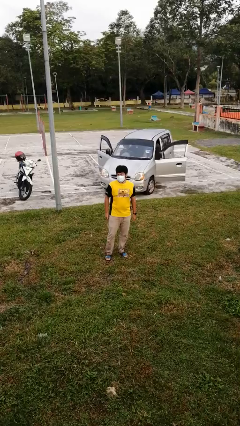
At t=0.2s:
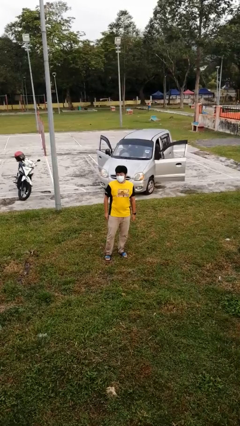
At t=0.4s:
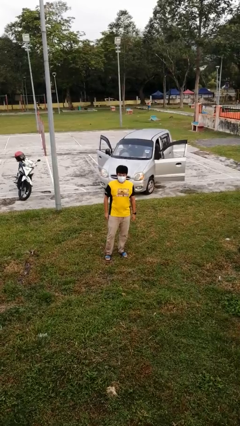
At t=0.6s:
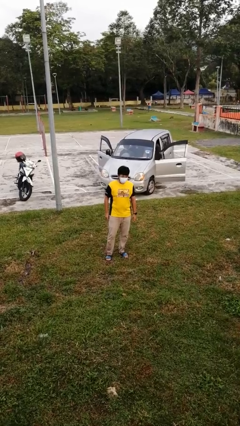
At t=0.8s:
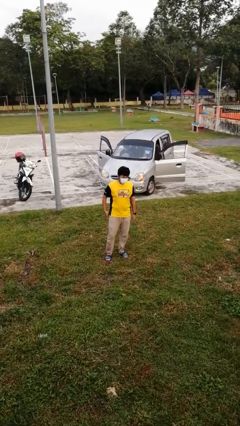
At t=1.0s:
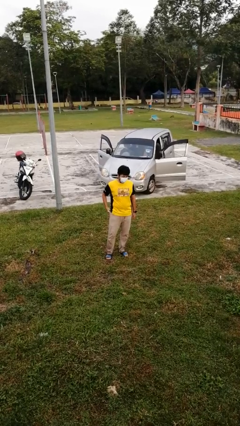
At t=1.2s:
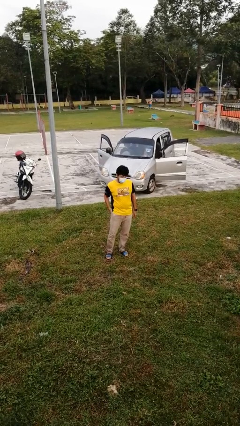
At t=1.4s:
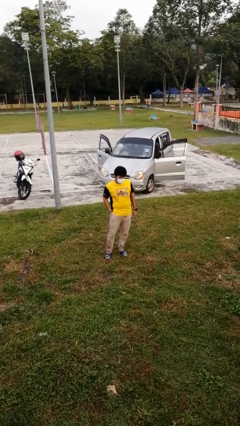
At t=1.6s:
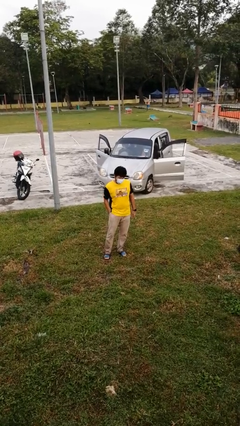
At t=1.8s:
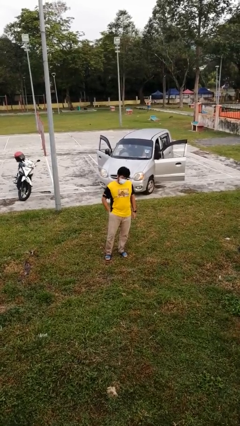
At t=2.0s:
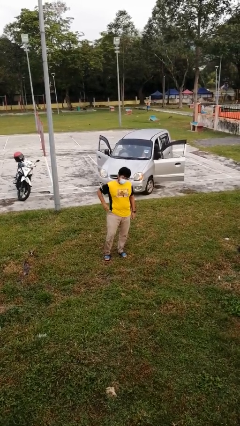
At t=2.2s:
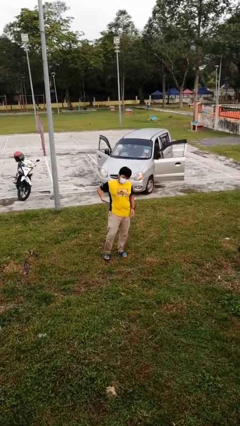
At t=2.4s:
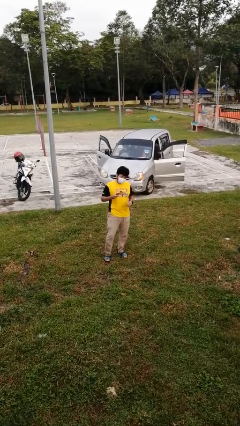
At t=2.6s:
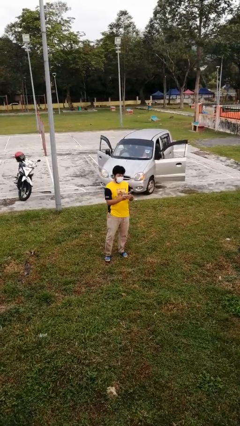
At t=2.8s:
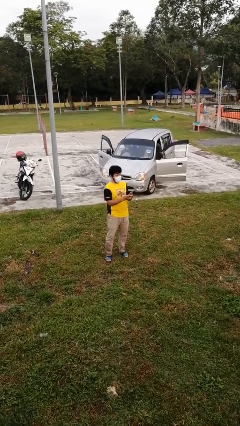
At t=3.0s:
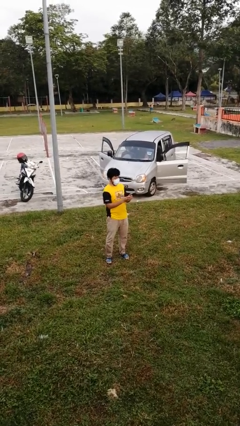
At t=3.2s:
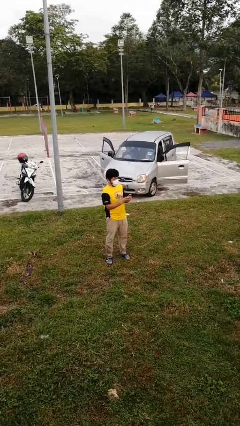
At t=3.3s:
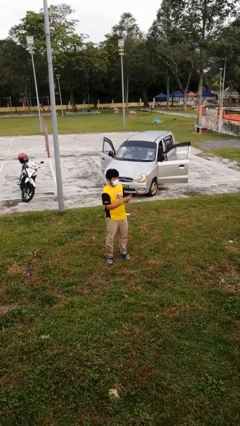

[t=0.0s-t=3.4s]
person takes phone from pocket

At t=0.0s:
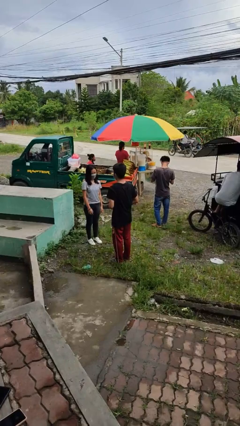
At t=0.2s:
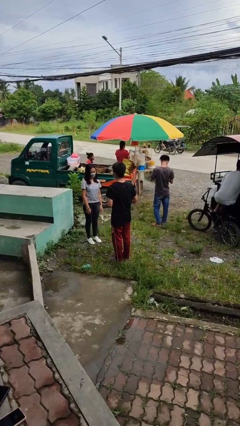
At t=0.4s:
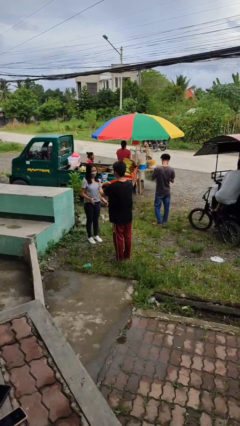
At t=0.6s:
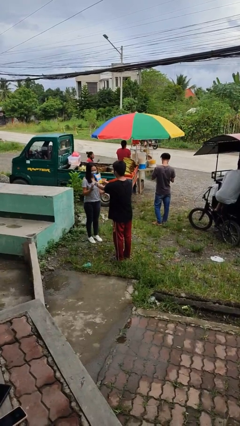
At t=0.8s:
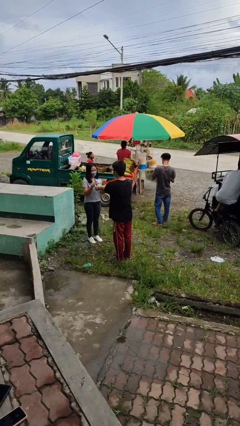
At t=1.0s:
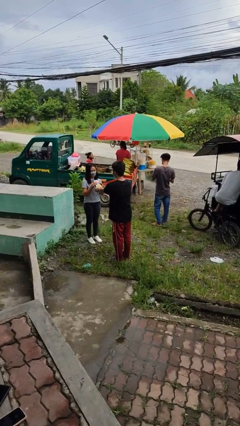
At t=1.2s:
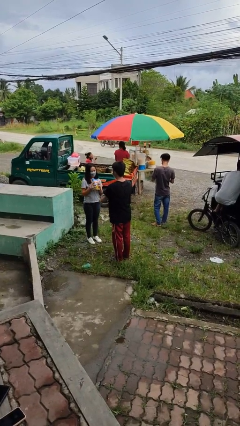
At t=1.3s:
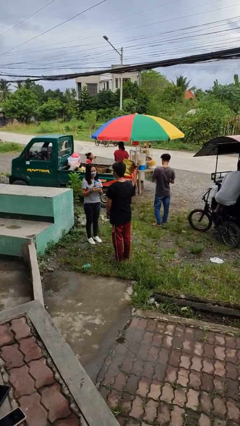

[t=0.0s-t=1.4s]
person transfers object to person

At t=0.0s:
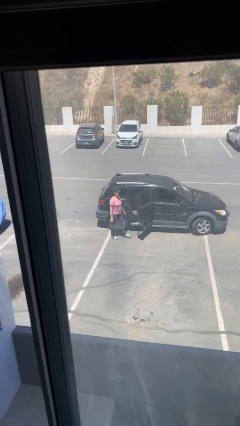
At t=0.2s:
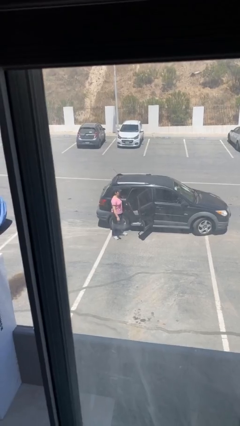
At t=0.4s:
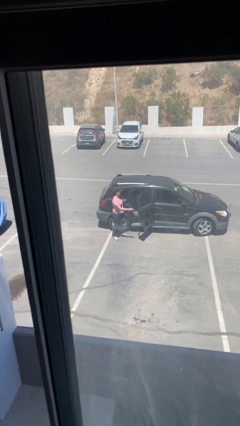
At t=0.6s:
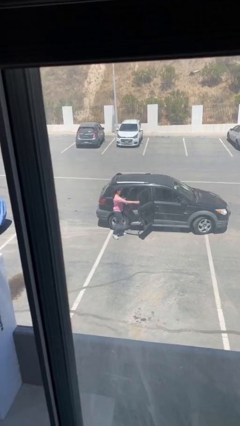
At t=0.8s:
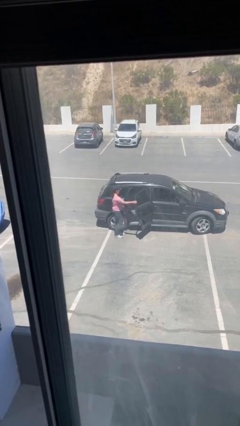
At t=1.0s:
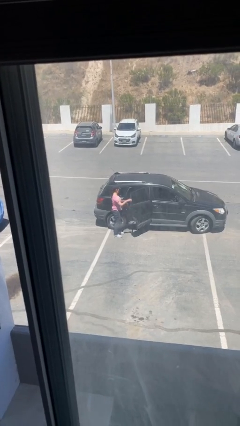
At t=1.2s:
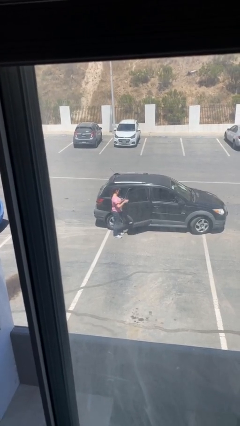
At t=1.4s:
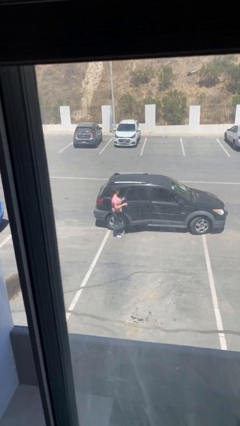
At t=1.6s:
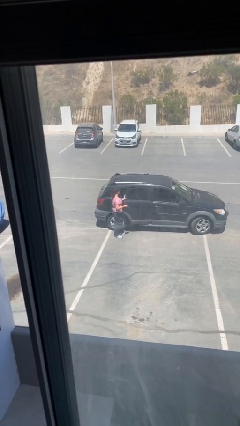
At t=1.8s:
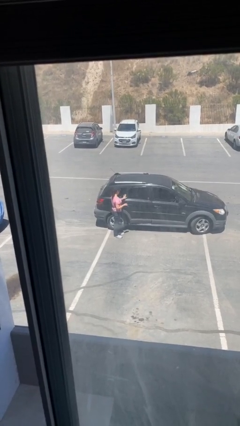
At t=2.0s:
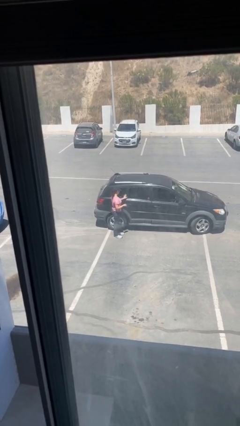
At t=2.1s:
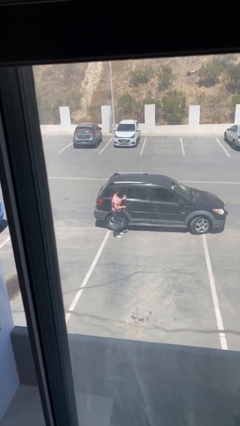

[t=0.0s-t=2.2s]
person closes car door

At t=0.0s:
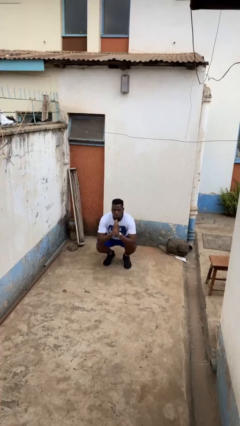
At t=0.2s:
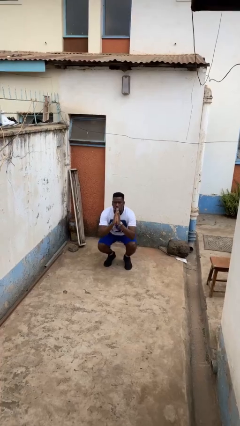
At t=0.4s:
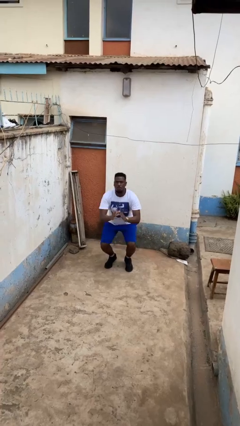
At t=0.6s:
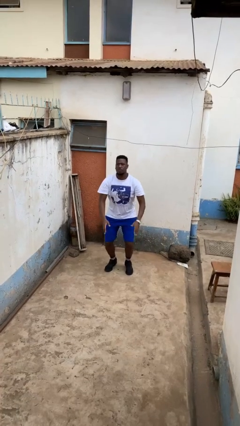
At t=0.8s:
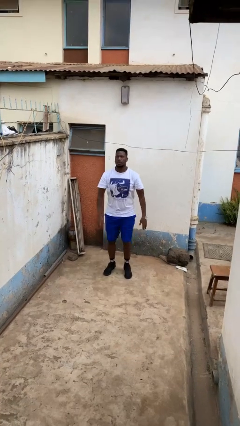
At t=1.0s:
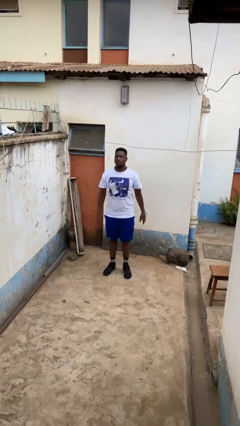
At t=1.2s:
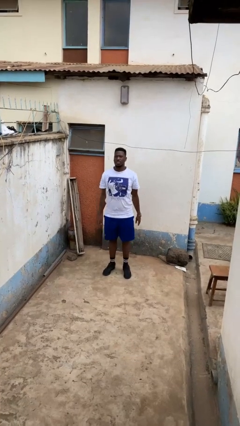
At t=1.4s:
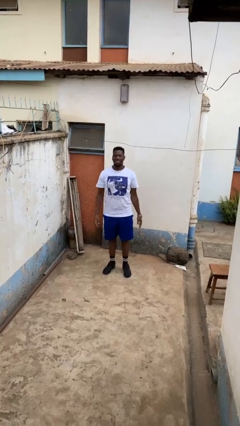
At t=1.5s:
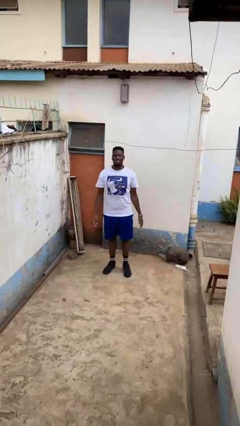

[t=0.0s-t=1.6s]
person stands up

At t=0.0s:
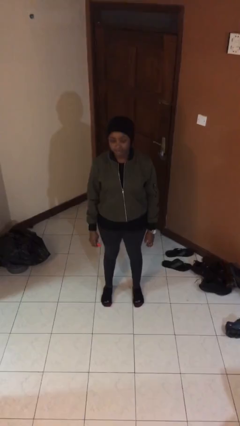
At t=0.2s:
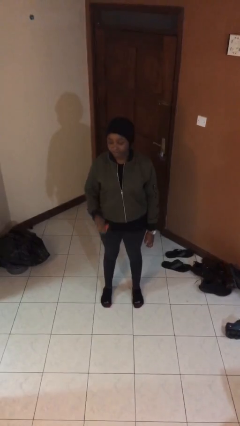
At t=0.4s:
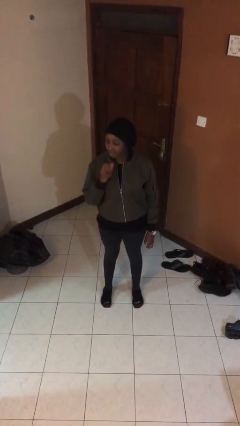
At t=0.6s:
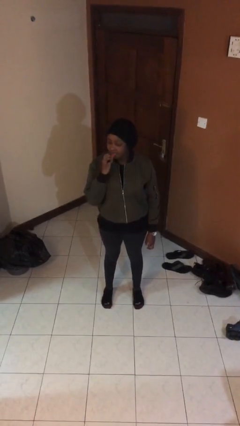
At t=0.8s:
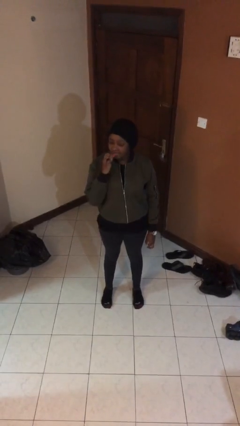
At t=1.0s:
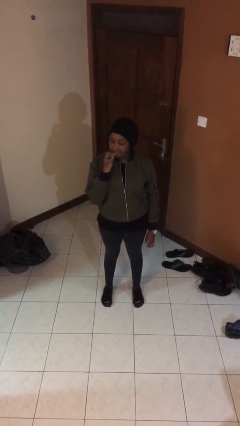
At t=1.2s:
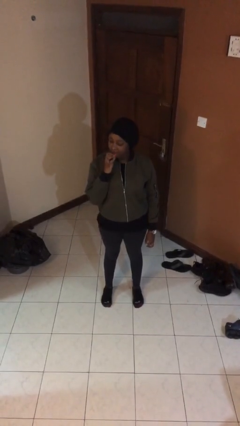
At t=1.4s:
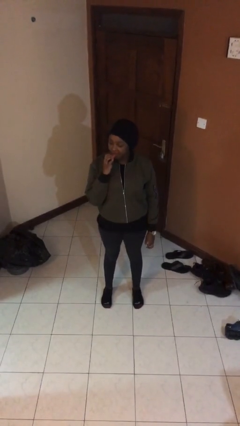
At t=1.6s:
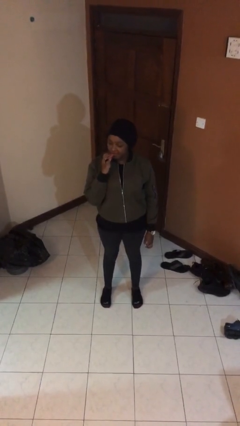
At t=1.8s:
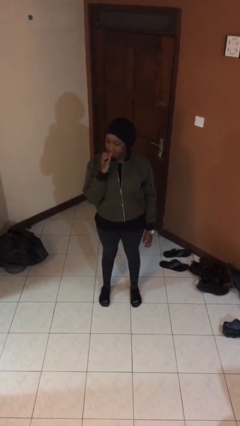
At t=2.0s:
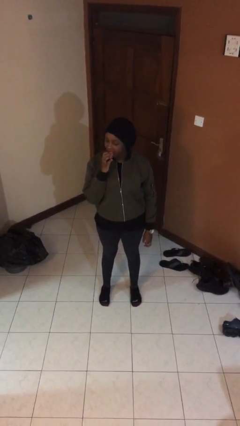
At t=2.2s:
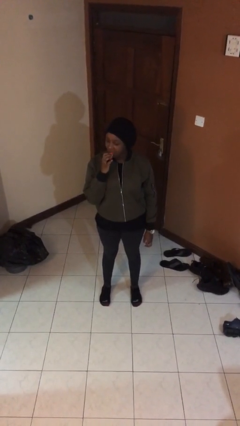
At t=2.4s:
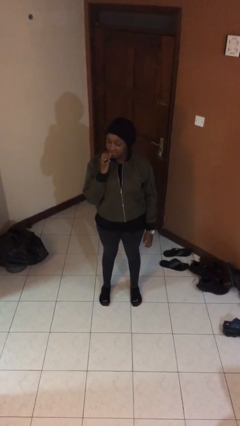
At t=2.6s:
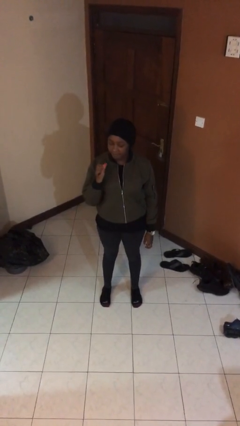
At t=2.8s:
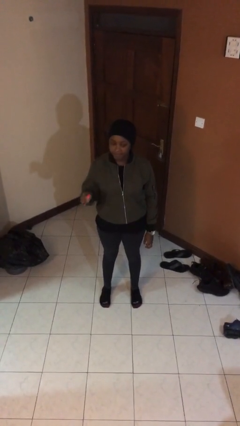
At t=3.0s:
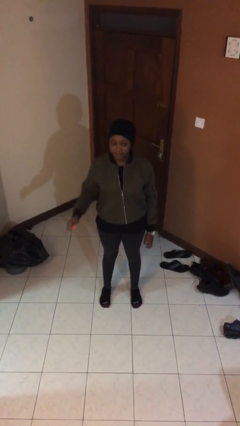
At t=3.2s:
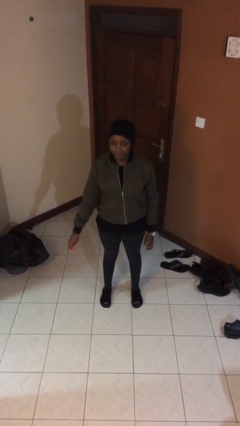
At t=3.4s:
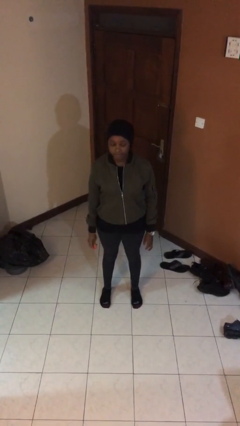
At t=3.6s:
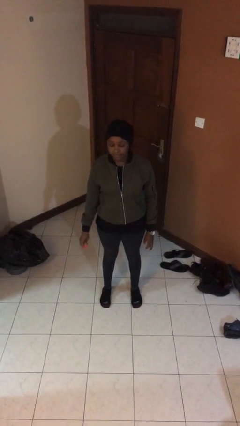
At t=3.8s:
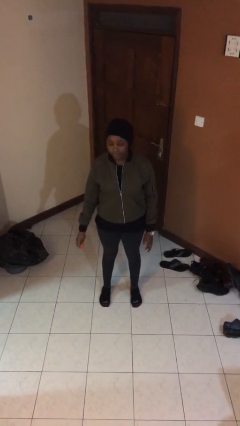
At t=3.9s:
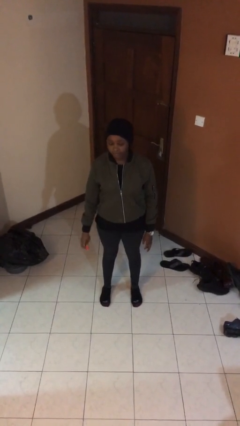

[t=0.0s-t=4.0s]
person applies lip makeup

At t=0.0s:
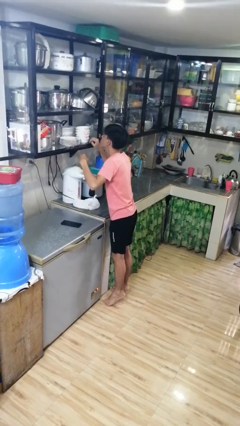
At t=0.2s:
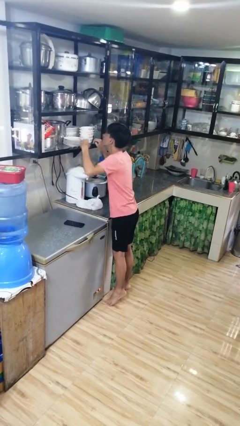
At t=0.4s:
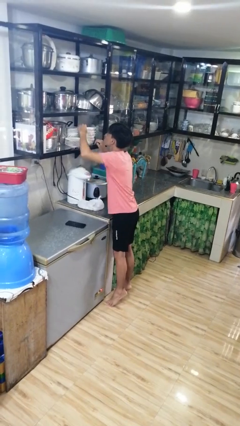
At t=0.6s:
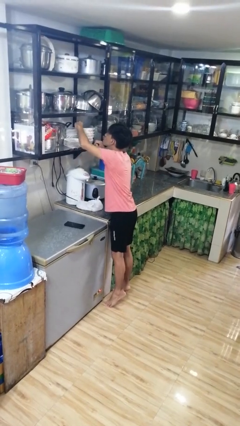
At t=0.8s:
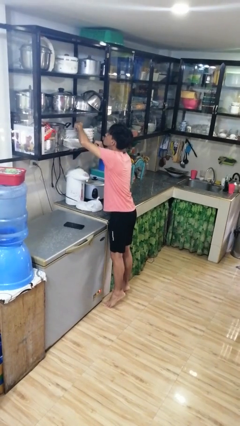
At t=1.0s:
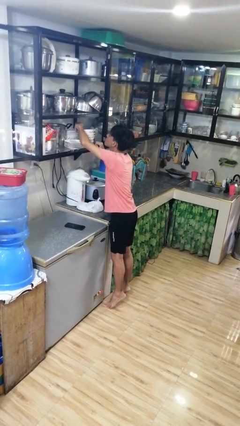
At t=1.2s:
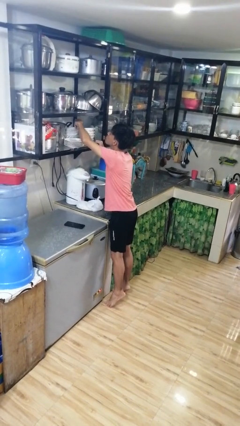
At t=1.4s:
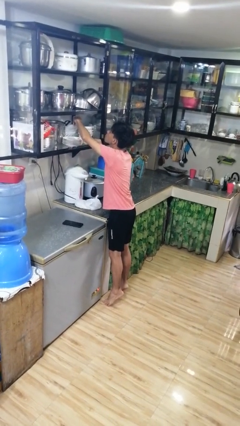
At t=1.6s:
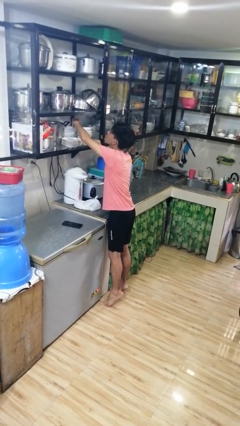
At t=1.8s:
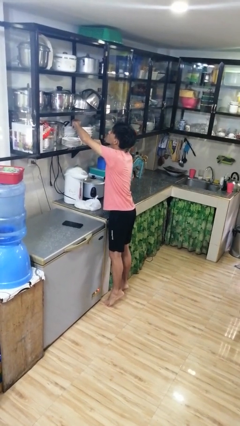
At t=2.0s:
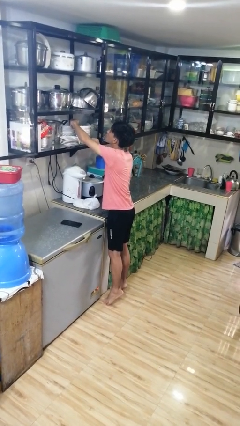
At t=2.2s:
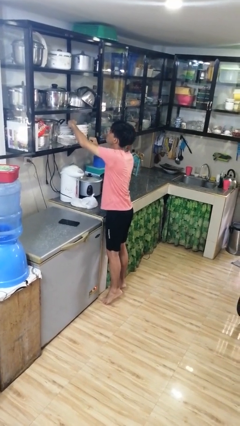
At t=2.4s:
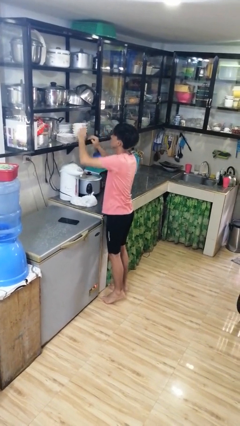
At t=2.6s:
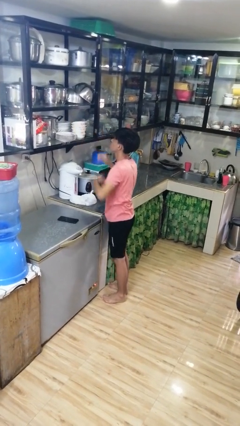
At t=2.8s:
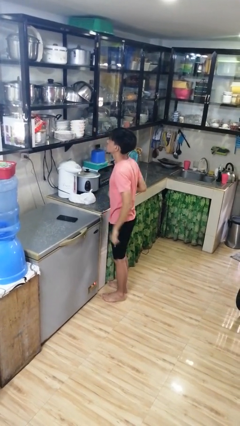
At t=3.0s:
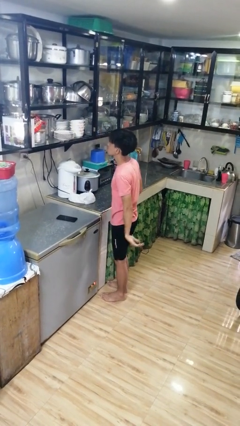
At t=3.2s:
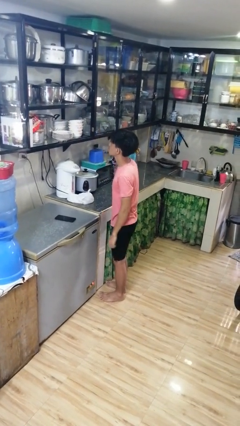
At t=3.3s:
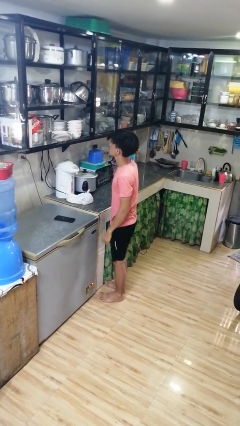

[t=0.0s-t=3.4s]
person takes off backpack

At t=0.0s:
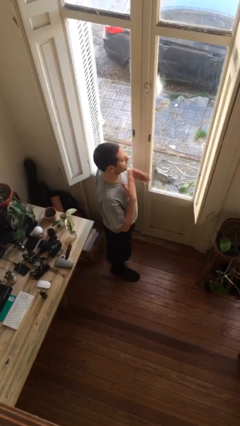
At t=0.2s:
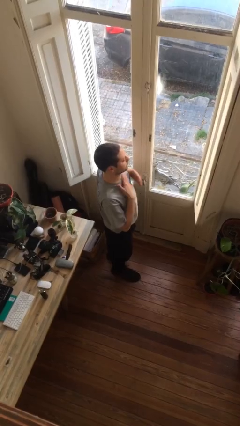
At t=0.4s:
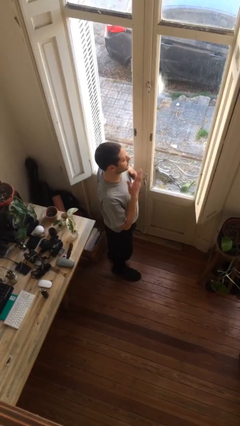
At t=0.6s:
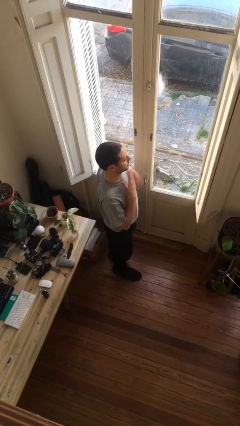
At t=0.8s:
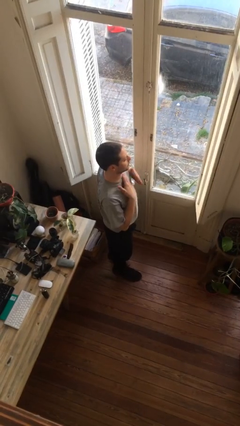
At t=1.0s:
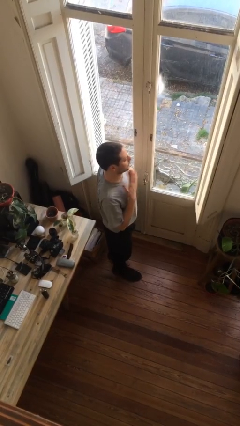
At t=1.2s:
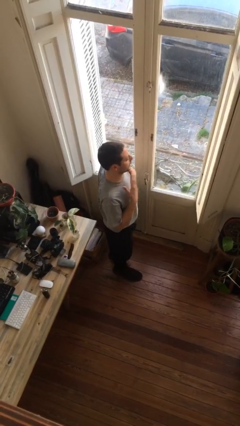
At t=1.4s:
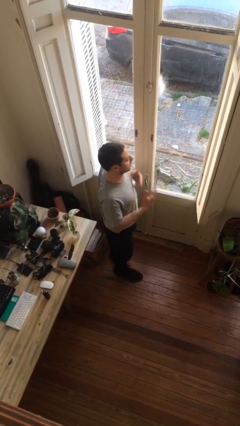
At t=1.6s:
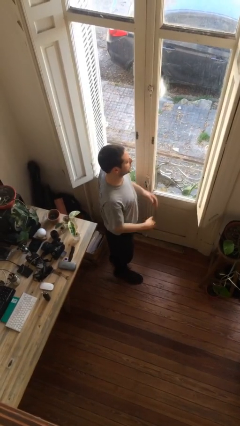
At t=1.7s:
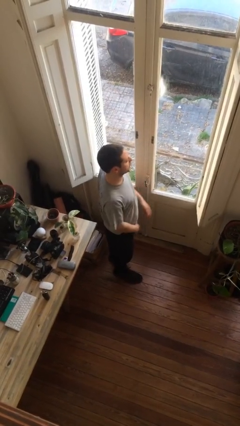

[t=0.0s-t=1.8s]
person drums on chest
